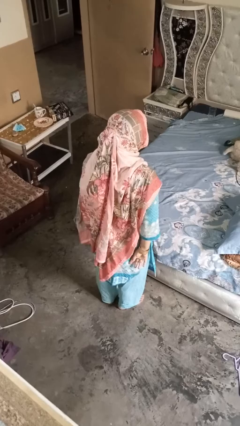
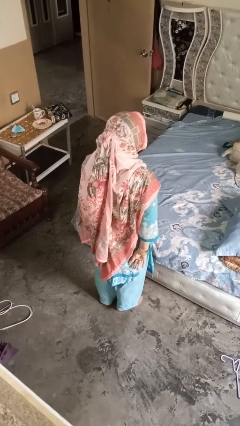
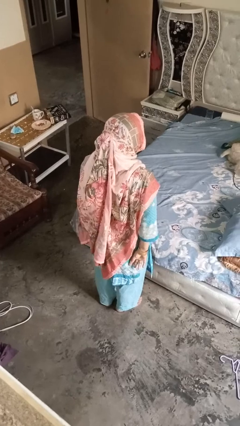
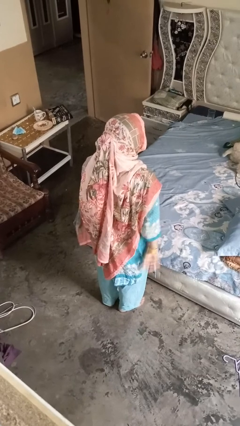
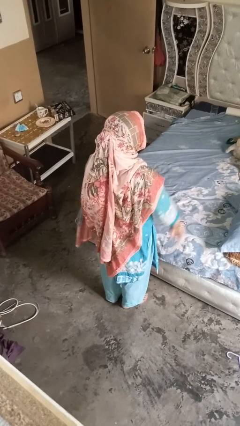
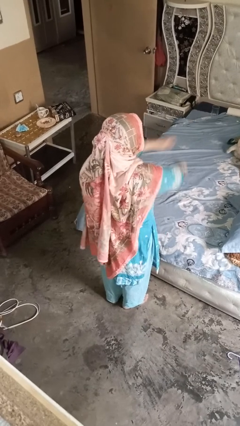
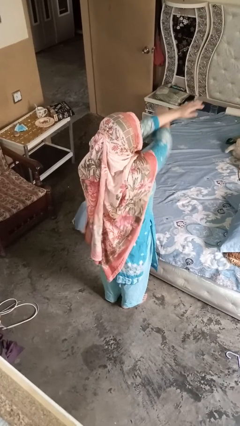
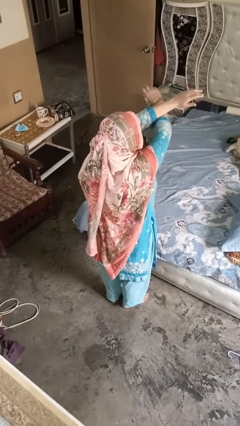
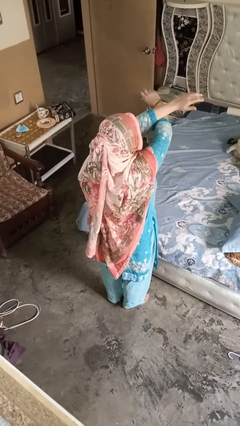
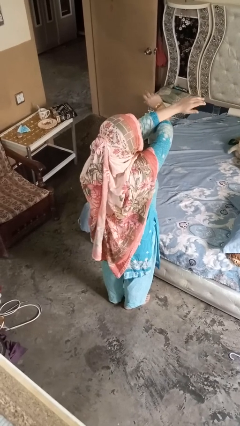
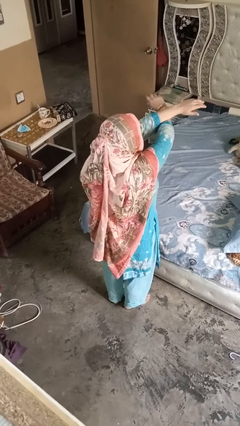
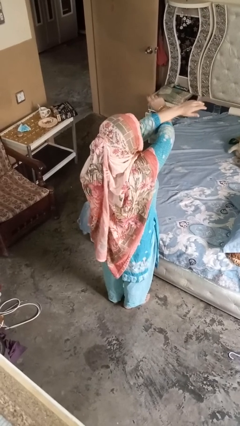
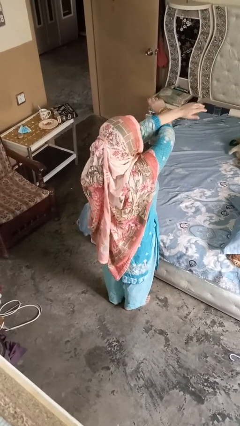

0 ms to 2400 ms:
person gestures arms x

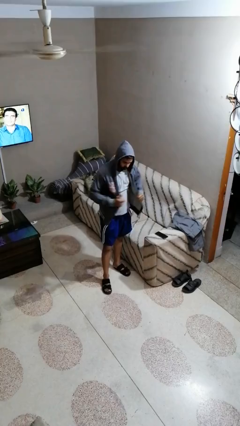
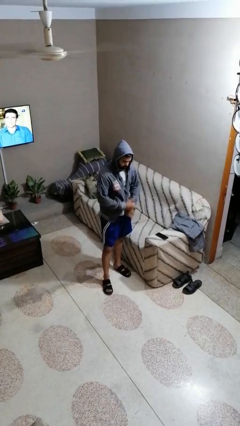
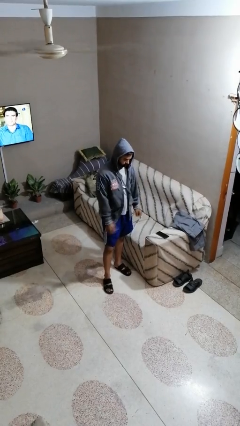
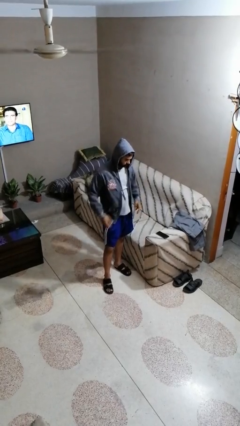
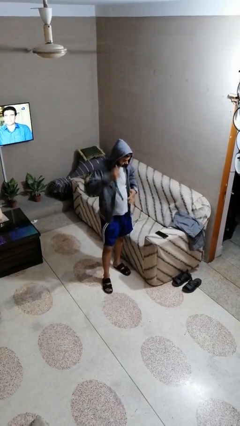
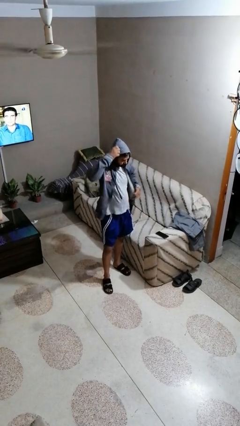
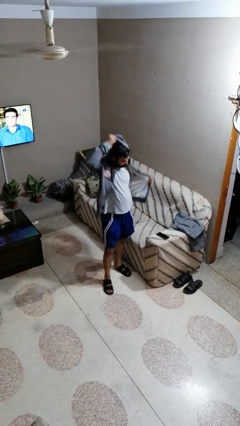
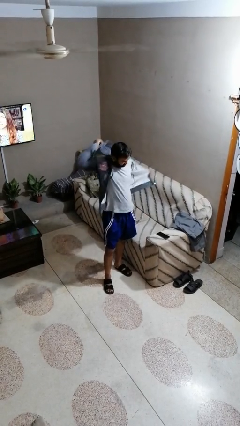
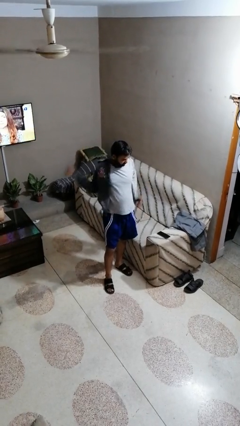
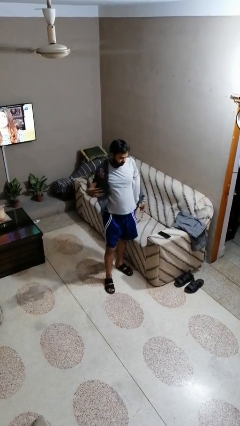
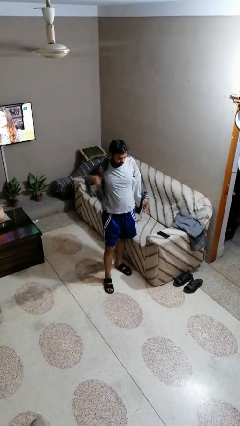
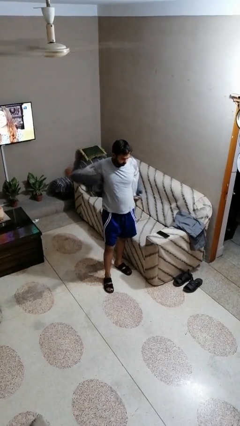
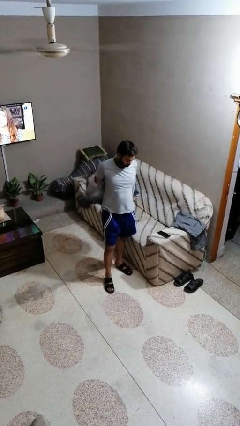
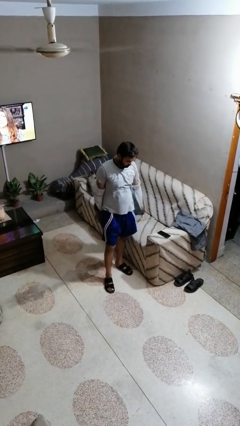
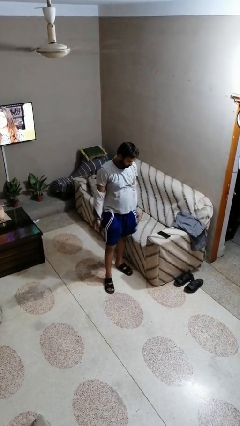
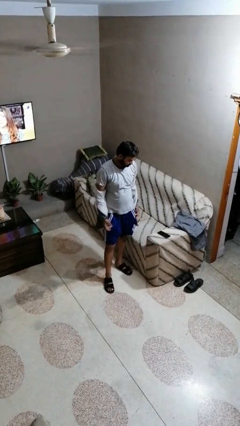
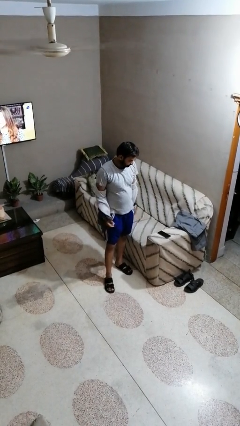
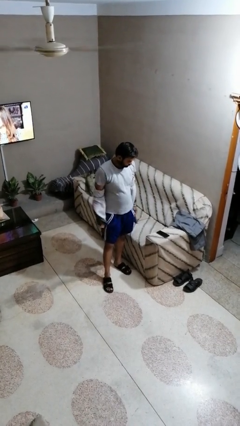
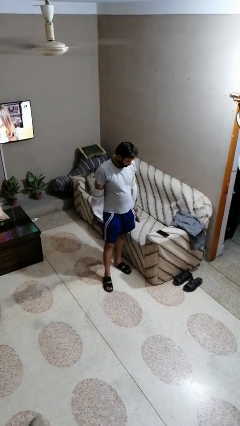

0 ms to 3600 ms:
person takes off hoodie

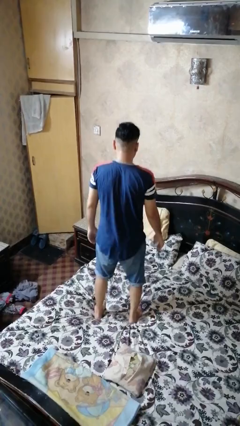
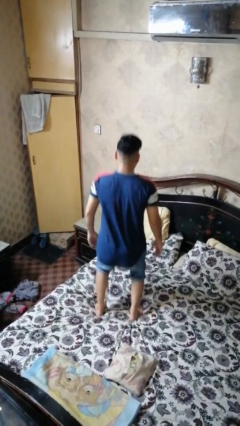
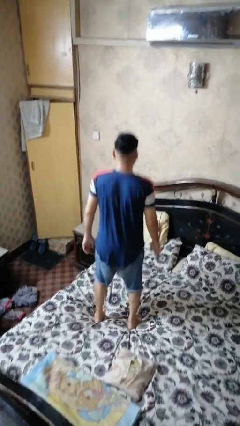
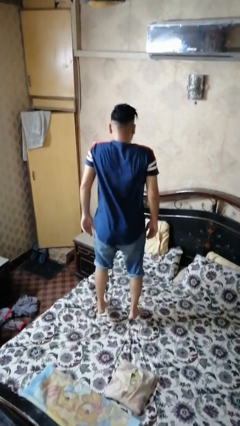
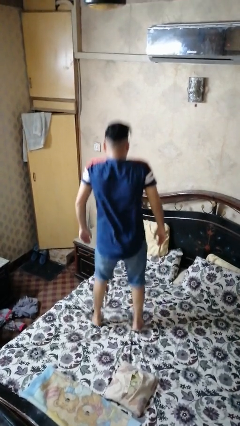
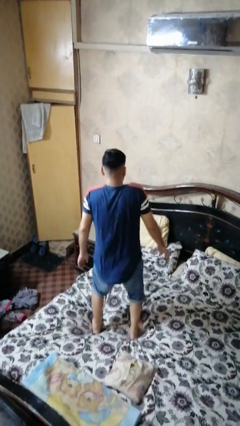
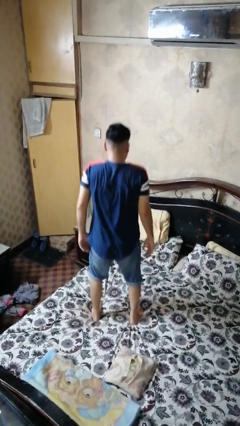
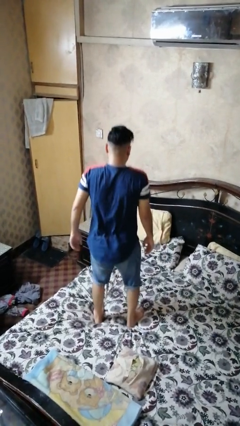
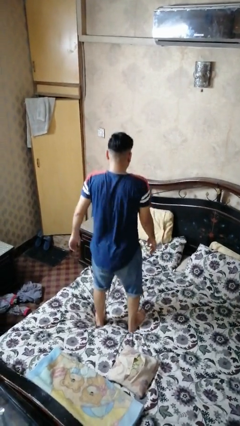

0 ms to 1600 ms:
person jumps on bed

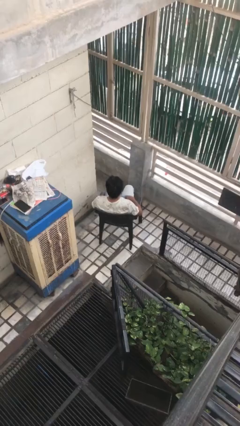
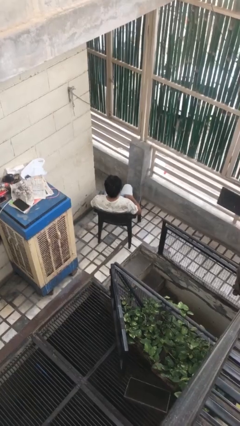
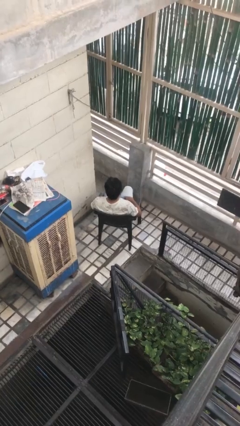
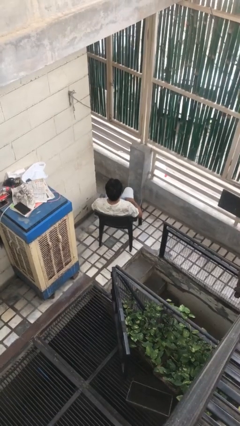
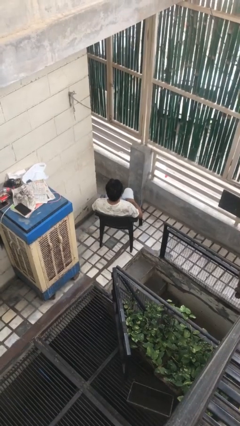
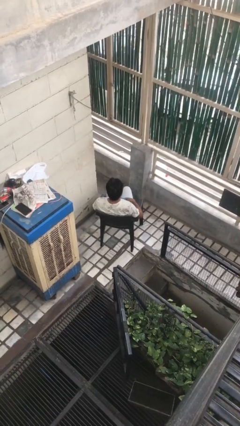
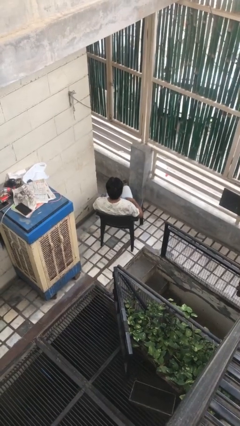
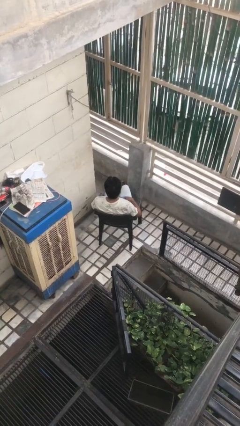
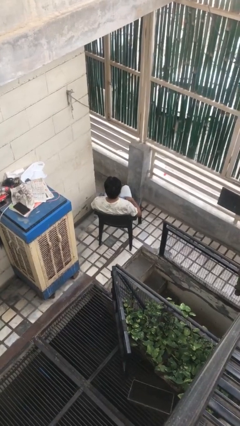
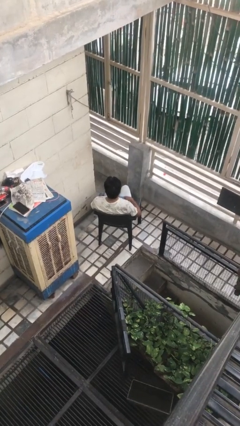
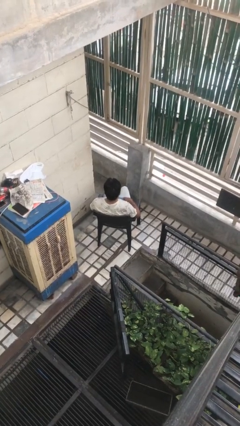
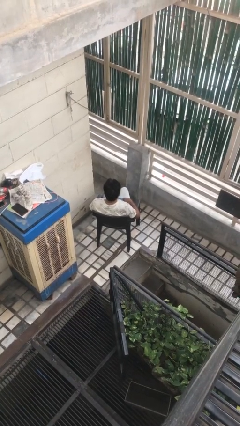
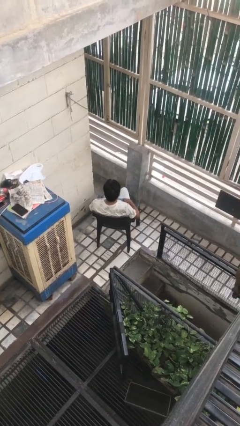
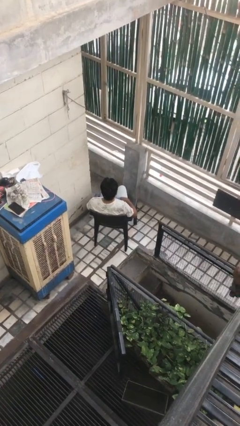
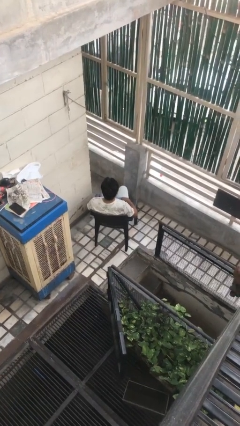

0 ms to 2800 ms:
person crosses legs

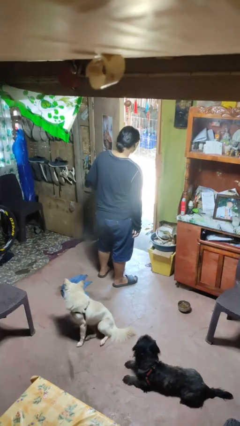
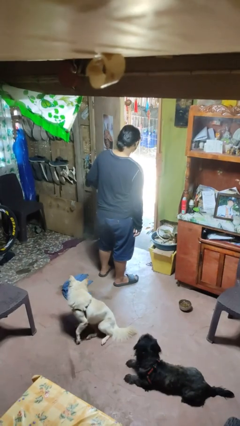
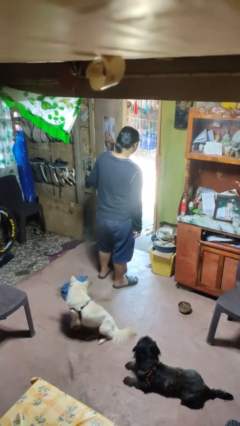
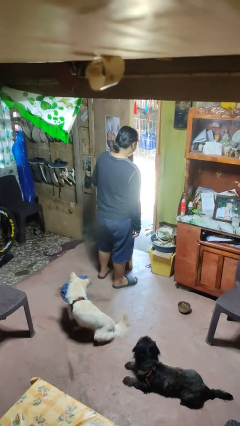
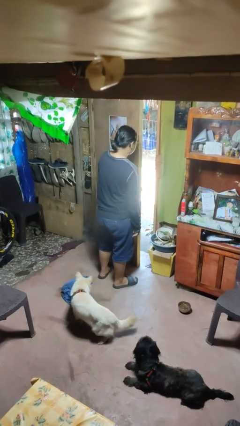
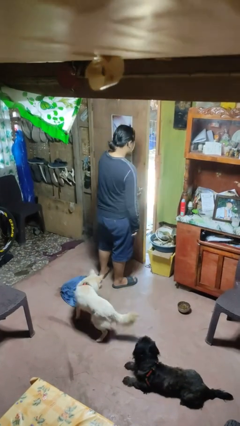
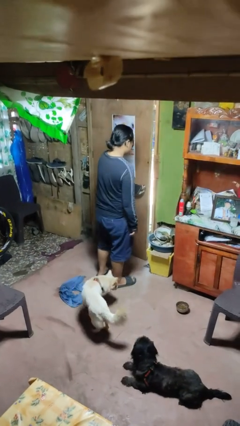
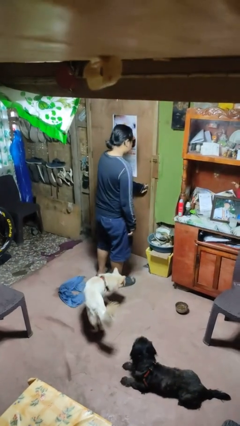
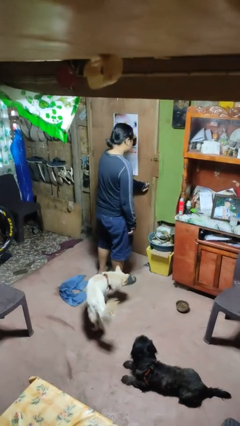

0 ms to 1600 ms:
person closes facility door

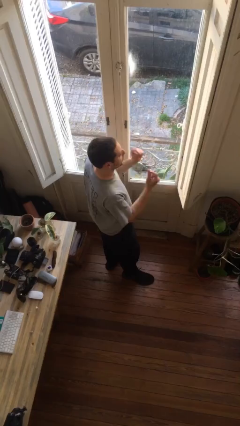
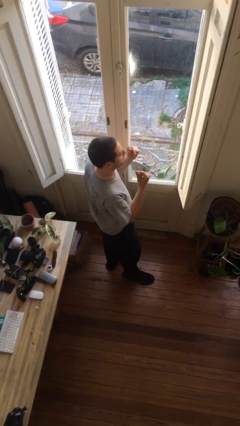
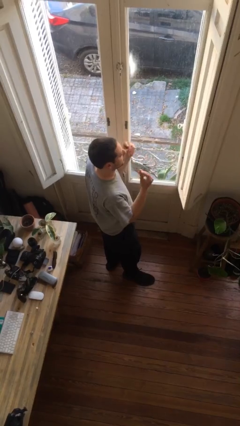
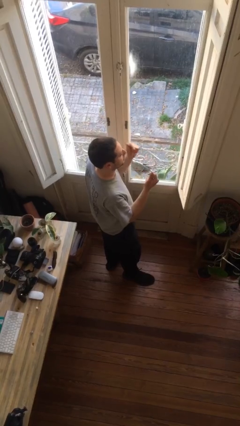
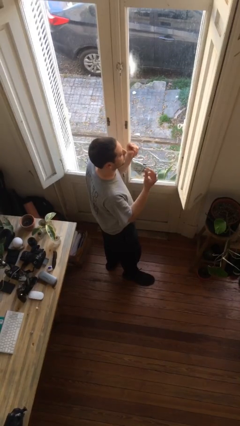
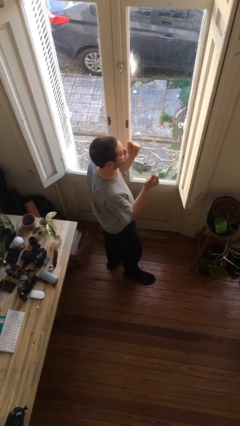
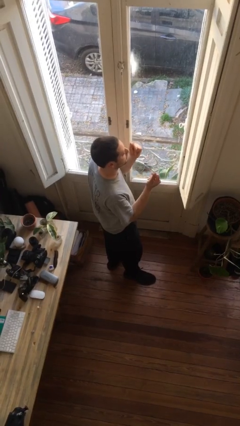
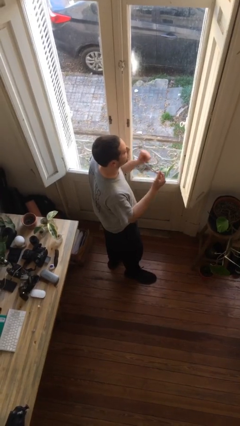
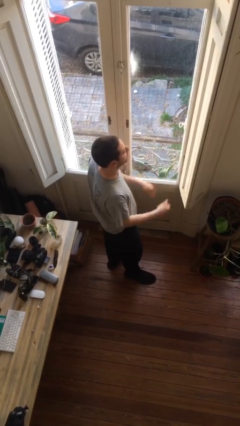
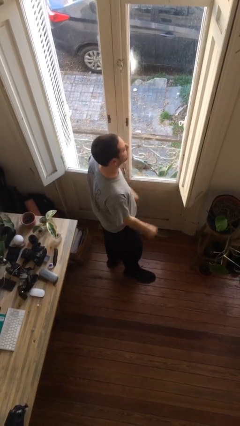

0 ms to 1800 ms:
person snaps fingers

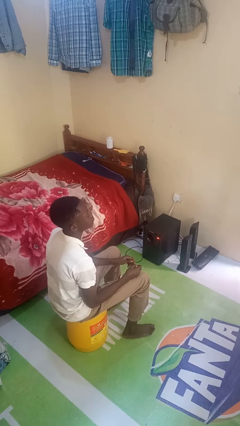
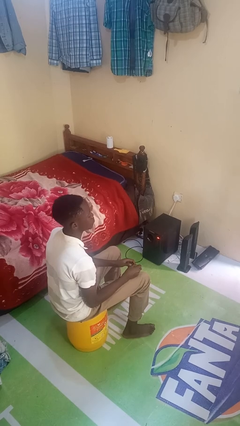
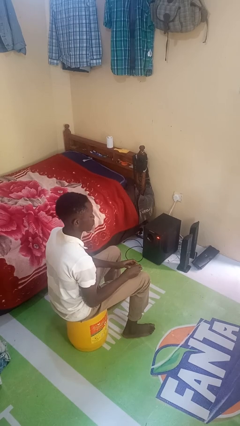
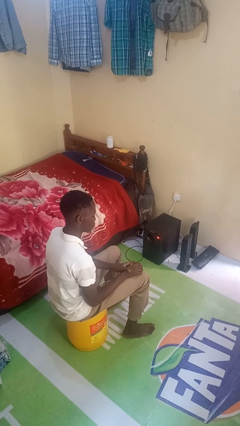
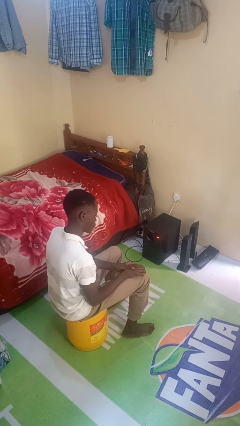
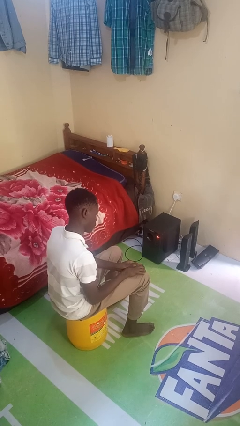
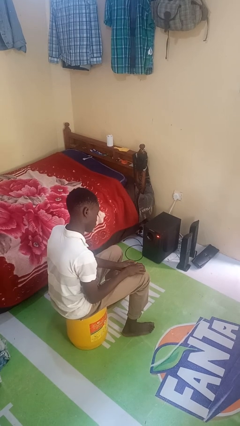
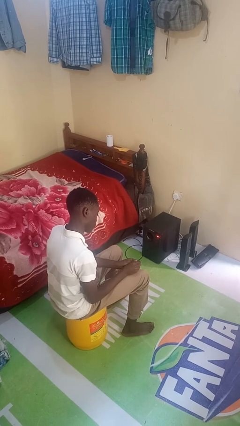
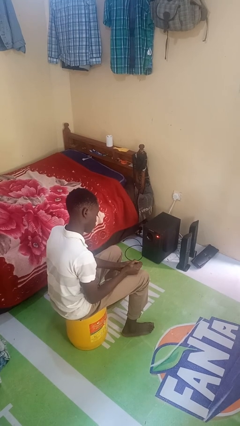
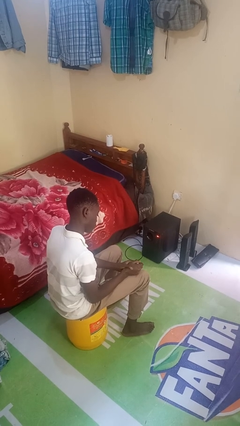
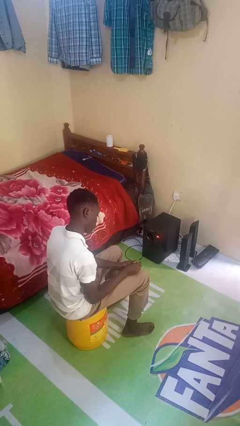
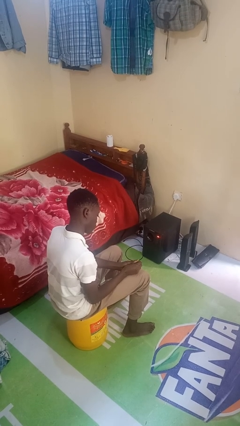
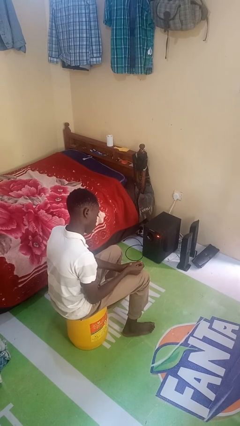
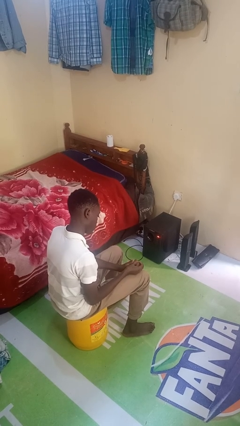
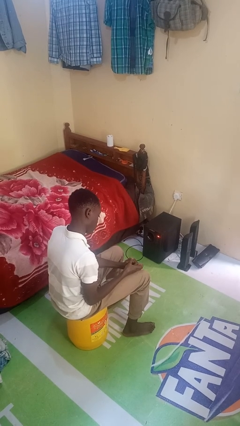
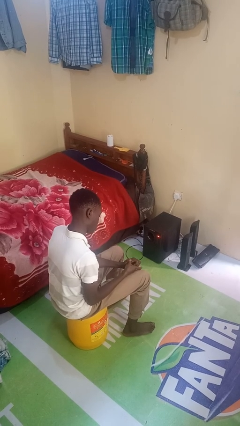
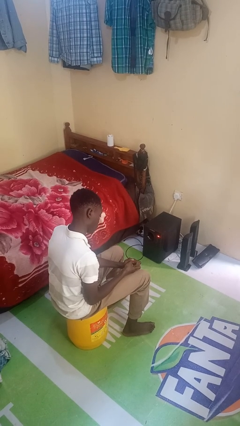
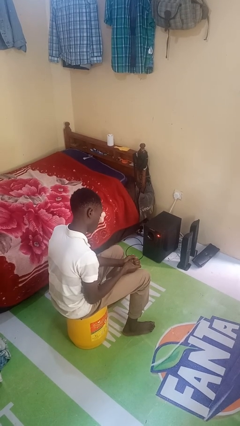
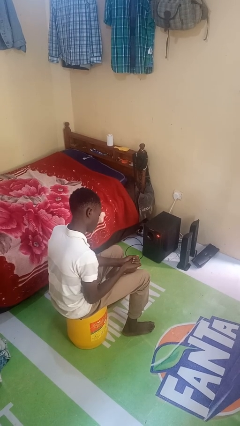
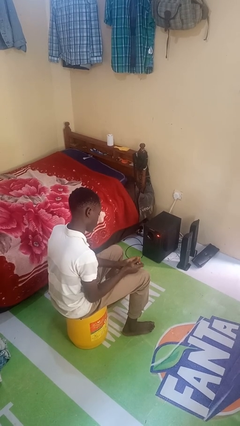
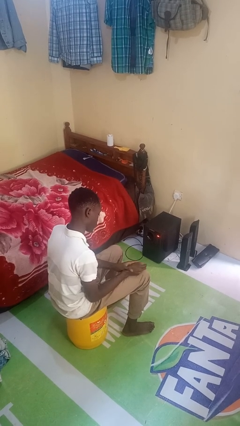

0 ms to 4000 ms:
person looks at hands in lap
